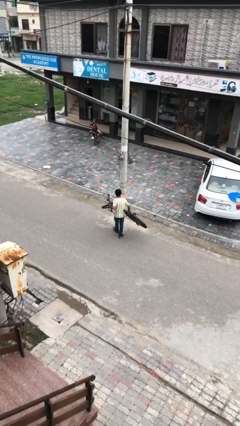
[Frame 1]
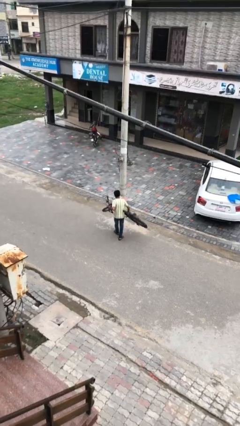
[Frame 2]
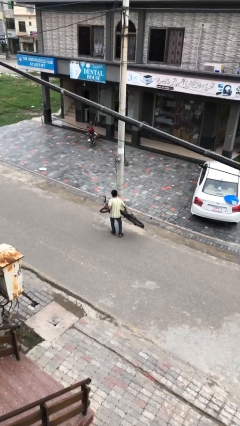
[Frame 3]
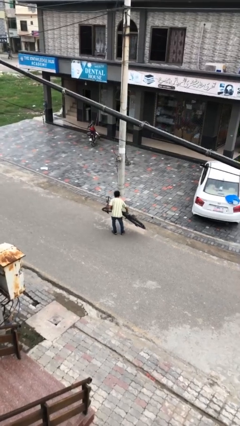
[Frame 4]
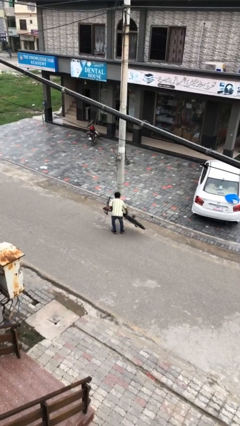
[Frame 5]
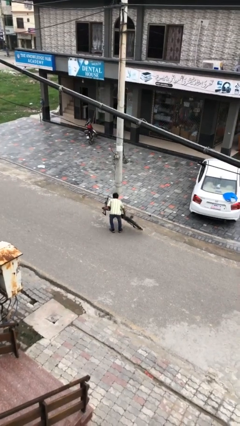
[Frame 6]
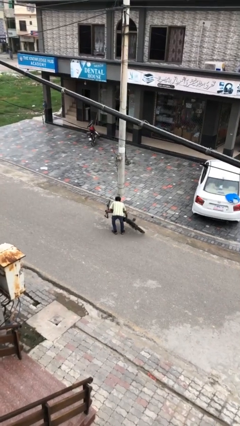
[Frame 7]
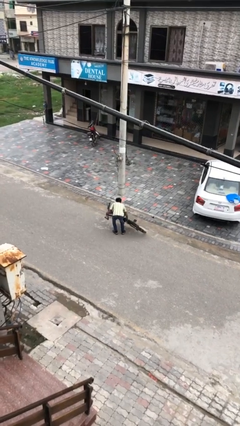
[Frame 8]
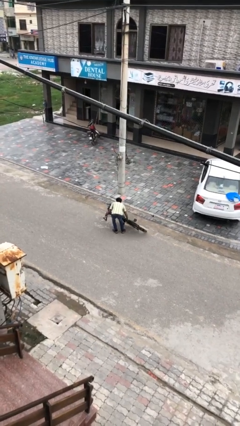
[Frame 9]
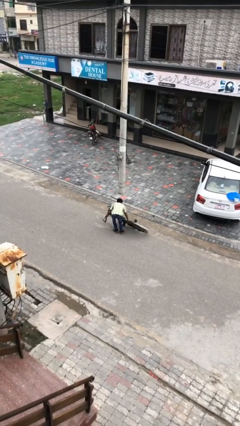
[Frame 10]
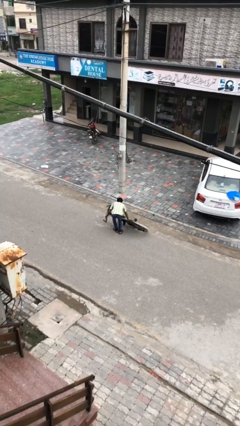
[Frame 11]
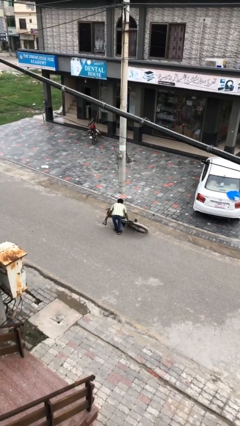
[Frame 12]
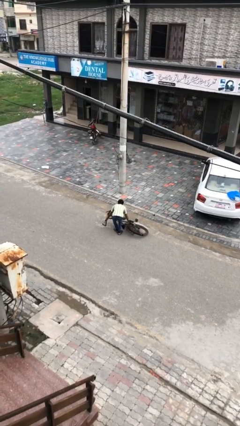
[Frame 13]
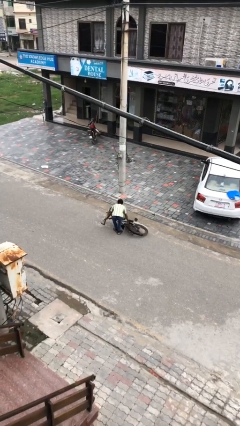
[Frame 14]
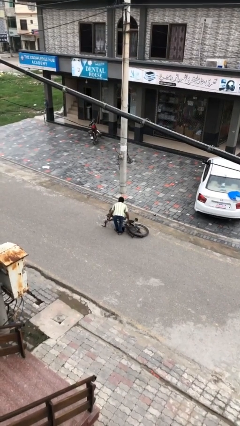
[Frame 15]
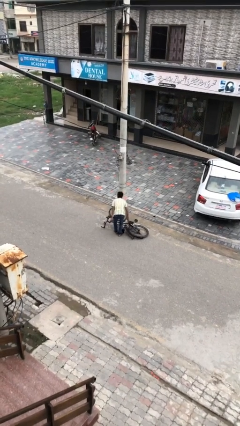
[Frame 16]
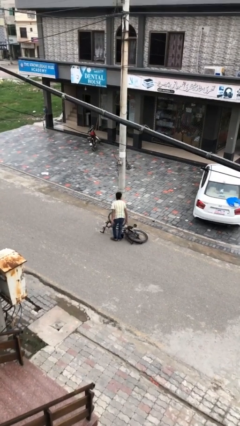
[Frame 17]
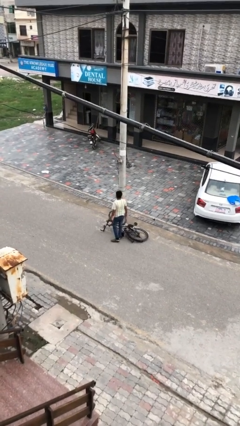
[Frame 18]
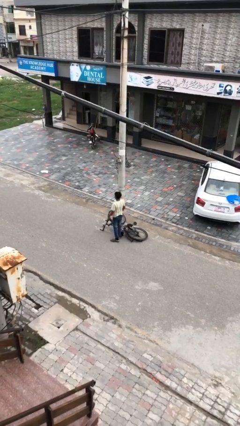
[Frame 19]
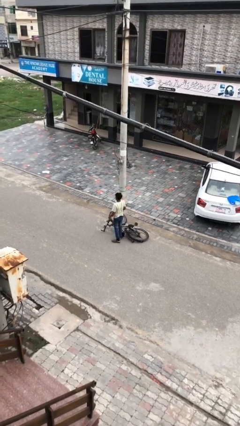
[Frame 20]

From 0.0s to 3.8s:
person puts down object on floor

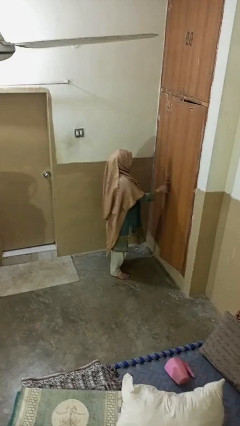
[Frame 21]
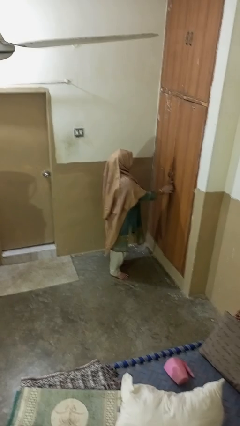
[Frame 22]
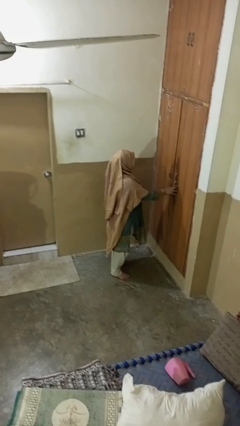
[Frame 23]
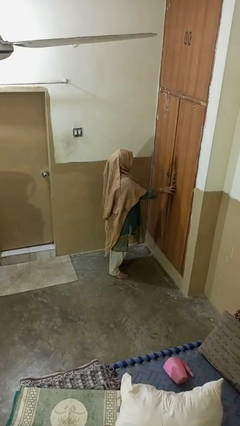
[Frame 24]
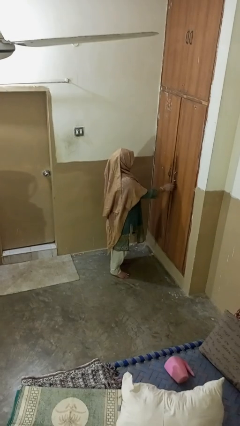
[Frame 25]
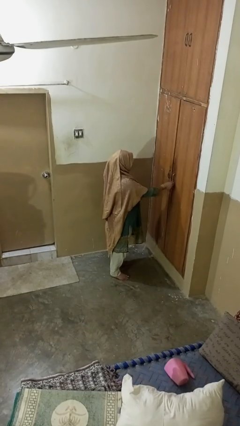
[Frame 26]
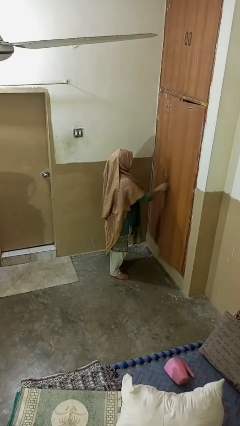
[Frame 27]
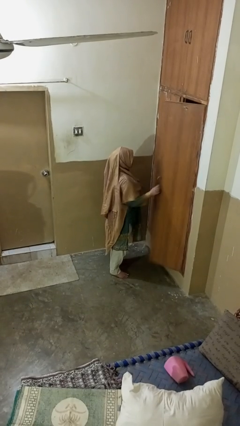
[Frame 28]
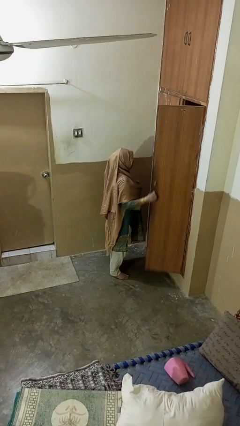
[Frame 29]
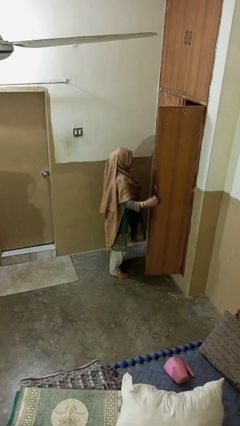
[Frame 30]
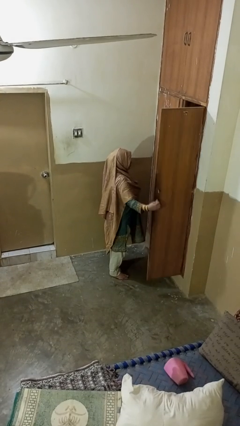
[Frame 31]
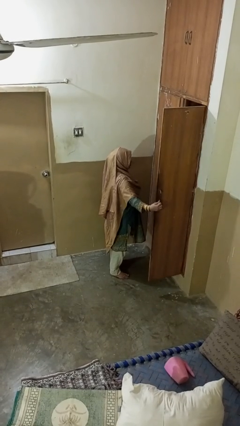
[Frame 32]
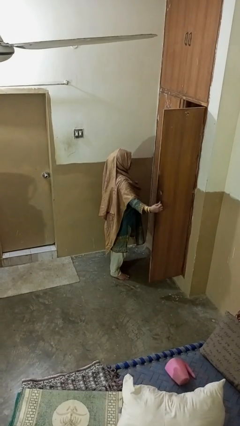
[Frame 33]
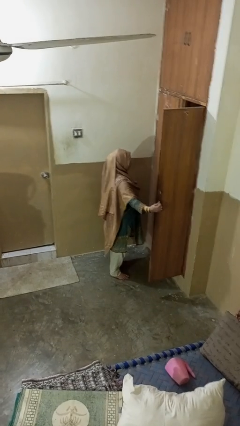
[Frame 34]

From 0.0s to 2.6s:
person opens closet door

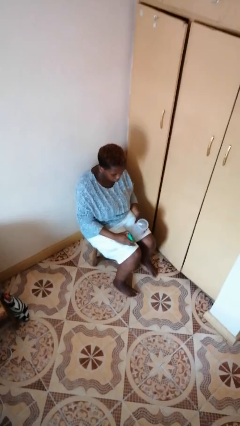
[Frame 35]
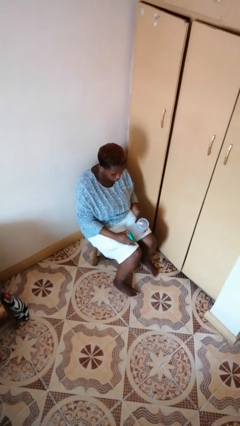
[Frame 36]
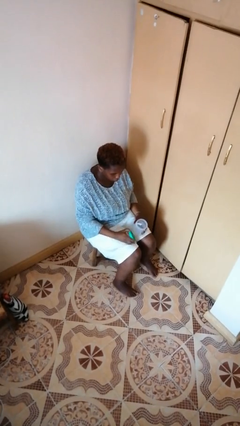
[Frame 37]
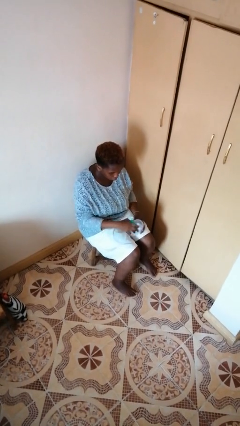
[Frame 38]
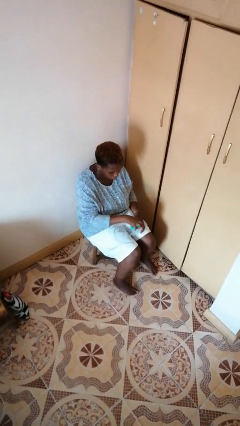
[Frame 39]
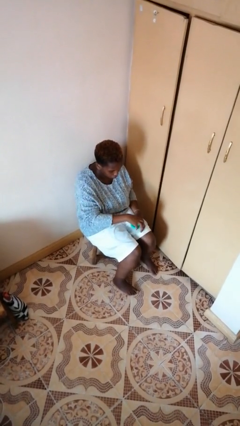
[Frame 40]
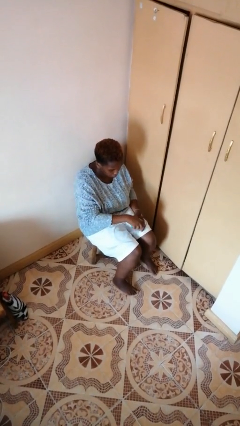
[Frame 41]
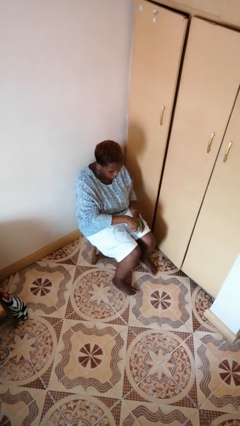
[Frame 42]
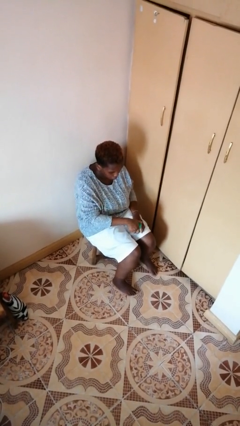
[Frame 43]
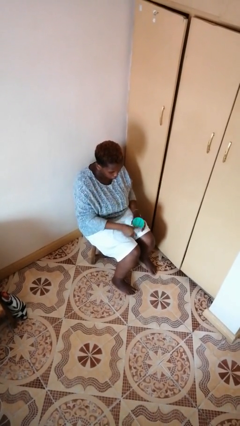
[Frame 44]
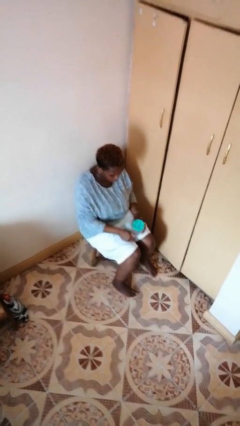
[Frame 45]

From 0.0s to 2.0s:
person closes jar

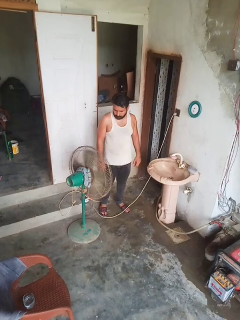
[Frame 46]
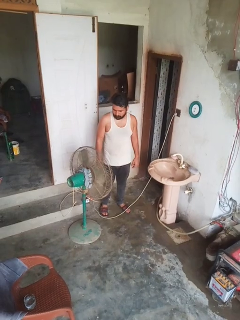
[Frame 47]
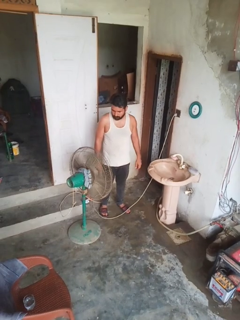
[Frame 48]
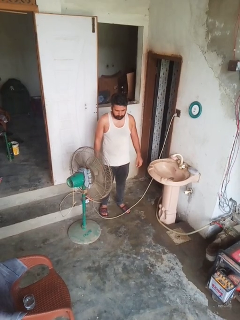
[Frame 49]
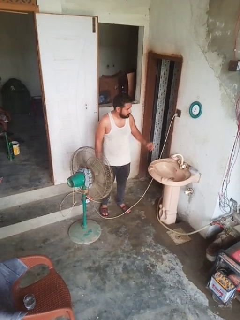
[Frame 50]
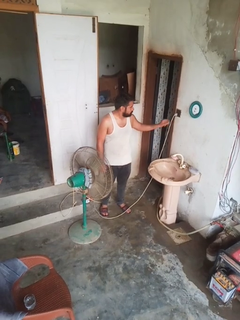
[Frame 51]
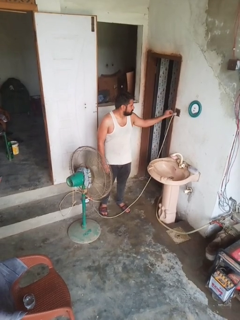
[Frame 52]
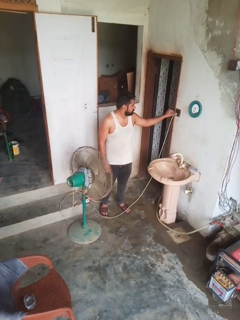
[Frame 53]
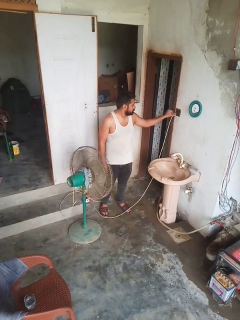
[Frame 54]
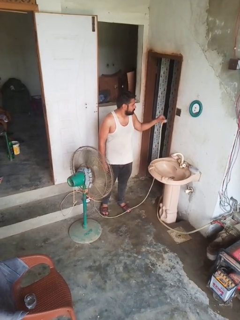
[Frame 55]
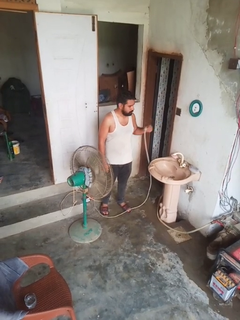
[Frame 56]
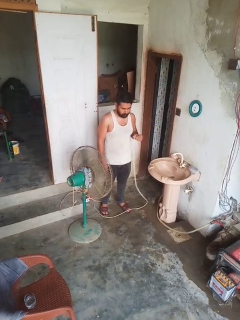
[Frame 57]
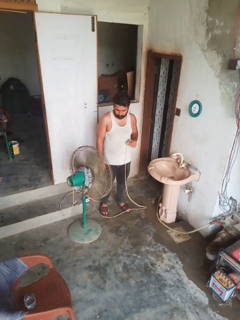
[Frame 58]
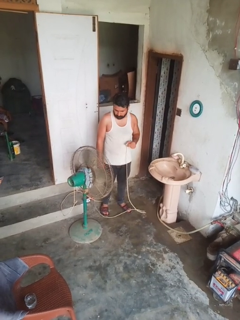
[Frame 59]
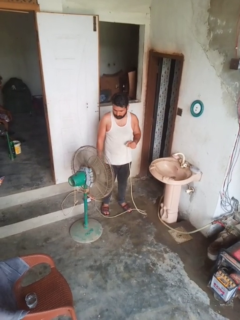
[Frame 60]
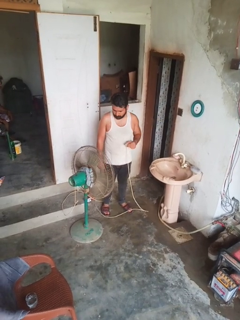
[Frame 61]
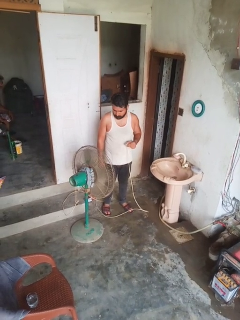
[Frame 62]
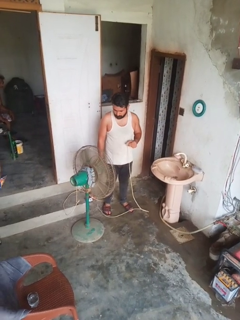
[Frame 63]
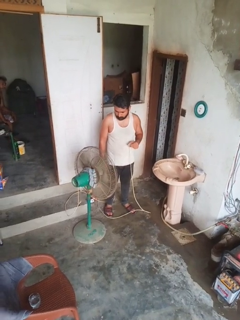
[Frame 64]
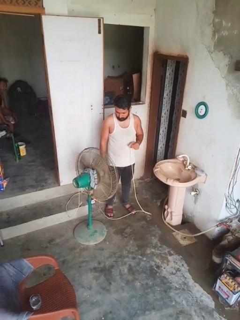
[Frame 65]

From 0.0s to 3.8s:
person turns off fan

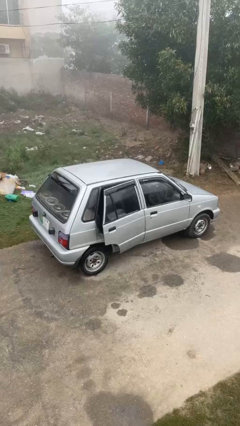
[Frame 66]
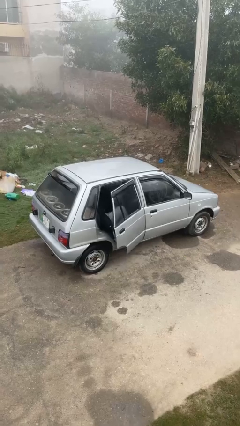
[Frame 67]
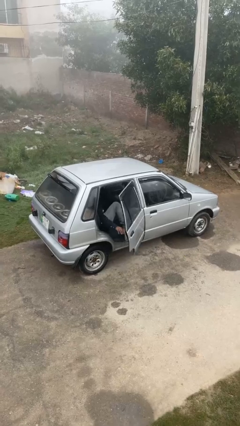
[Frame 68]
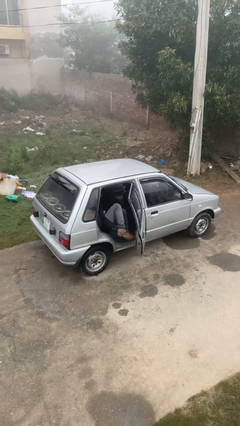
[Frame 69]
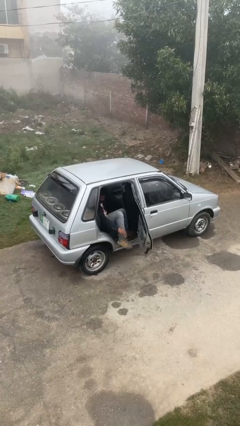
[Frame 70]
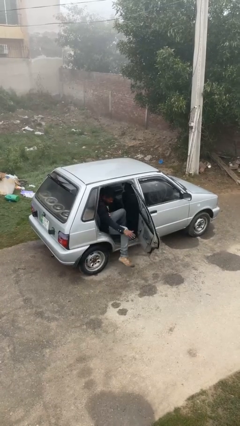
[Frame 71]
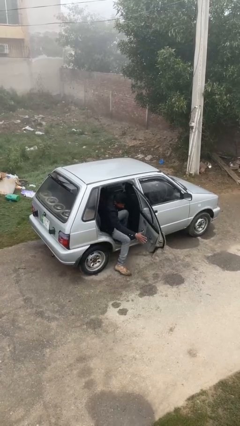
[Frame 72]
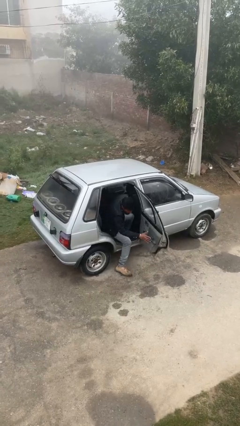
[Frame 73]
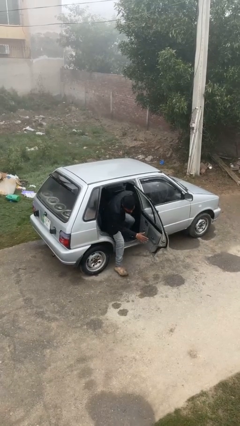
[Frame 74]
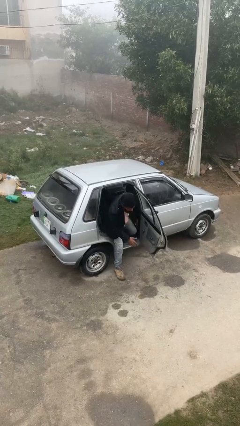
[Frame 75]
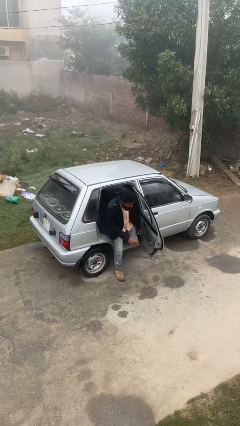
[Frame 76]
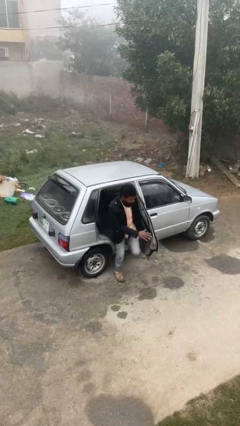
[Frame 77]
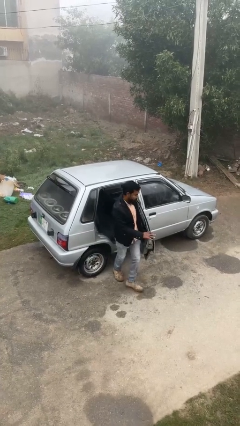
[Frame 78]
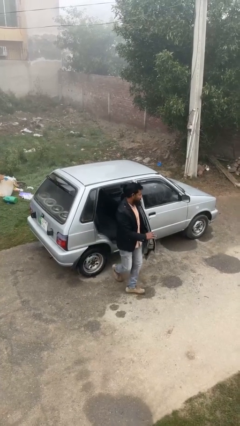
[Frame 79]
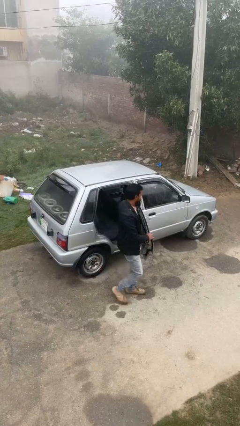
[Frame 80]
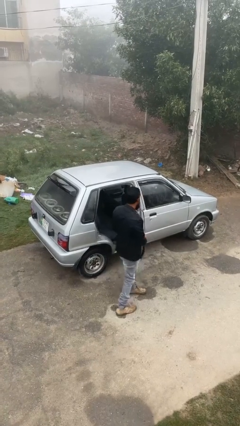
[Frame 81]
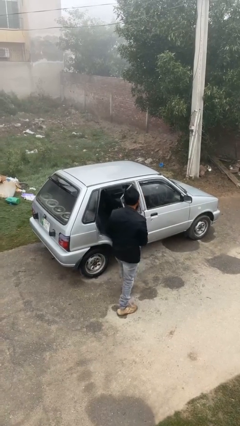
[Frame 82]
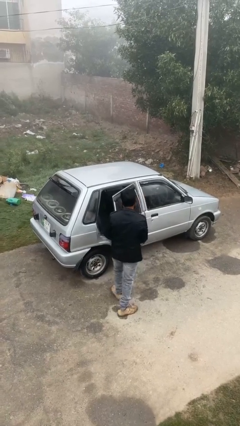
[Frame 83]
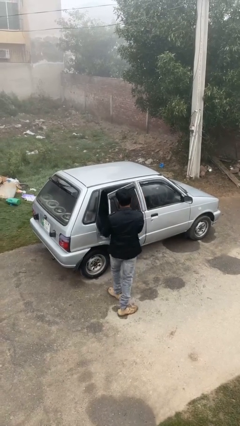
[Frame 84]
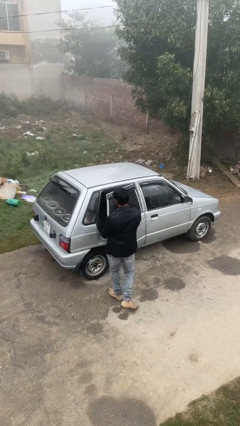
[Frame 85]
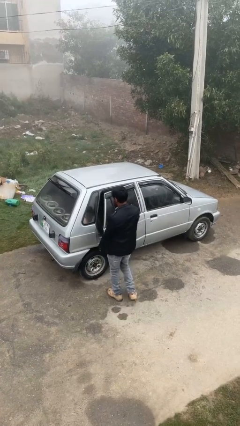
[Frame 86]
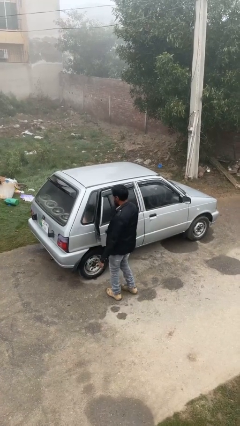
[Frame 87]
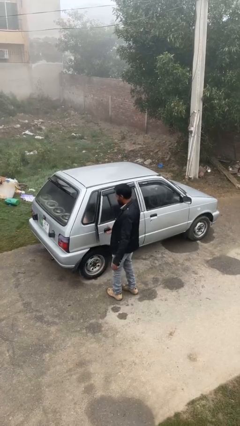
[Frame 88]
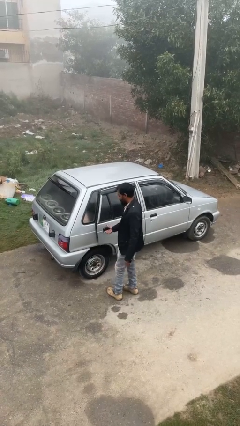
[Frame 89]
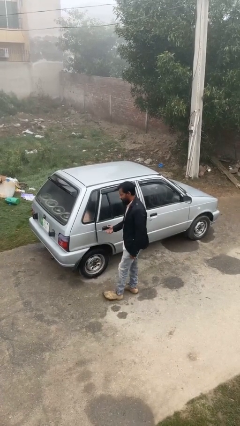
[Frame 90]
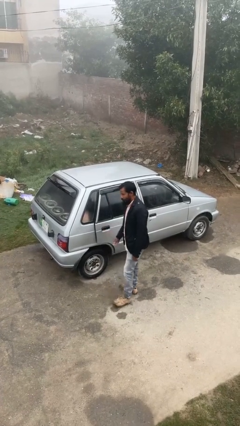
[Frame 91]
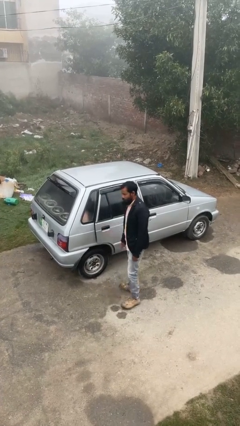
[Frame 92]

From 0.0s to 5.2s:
car drops off person

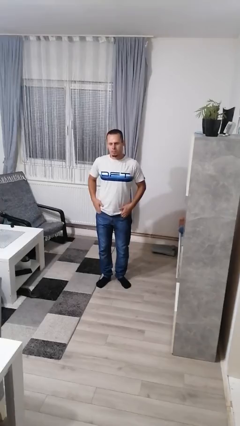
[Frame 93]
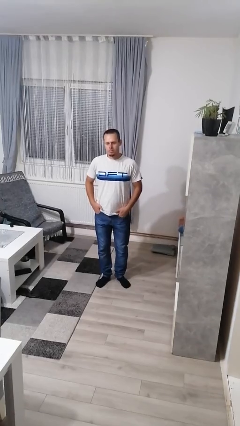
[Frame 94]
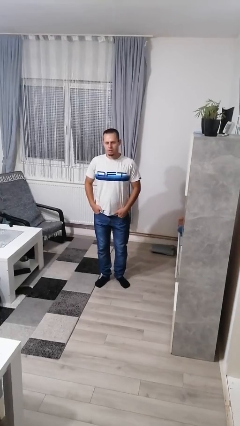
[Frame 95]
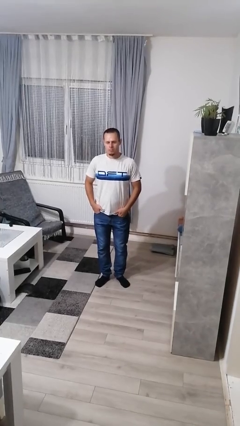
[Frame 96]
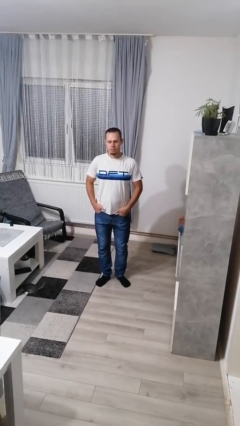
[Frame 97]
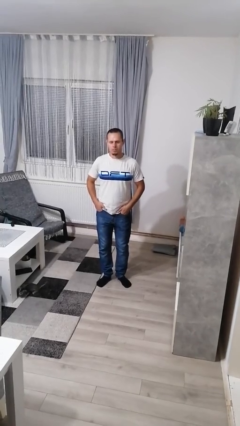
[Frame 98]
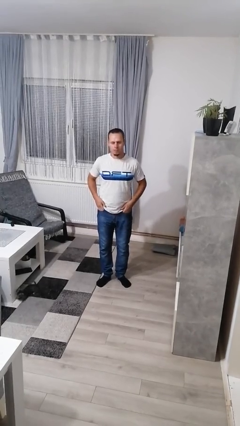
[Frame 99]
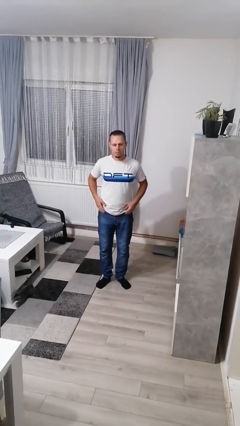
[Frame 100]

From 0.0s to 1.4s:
person puts hands in back pockets
